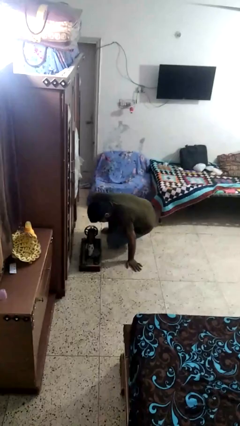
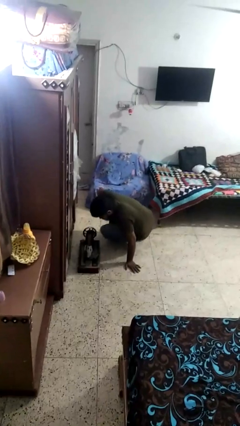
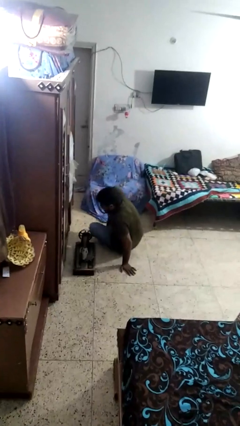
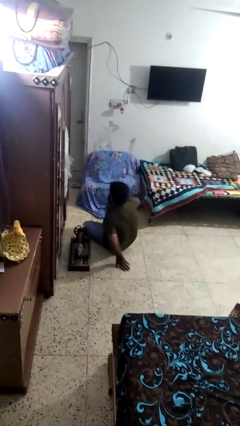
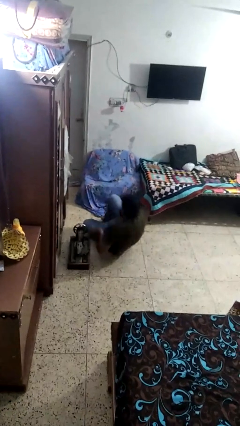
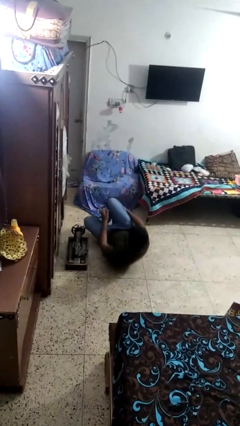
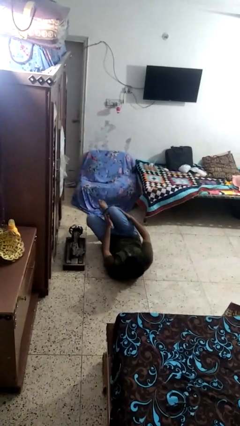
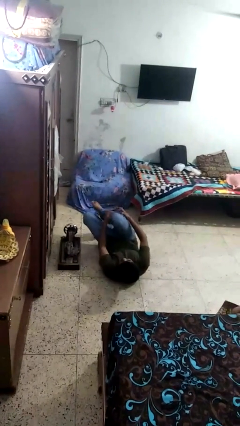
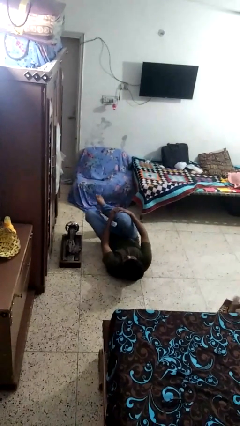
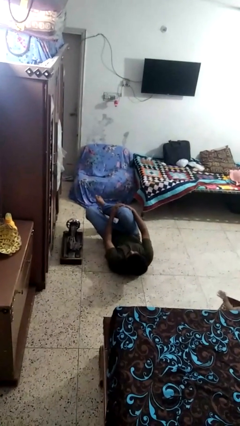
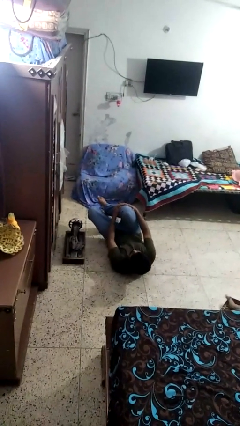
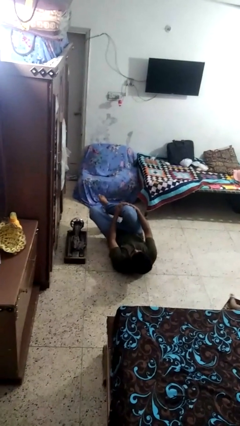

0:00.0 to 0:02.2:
person lies down on floor

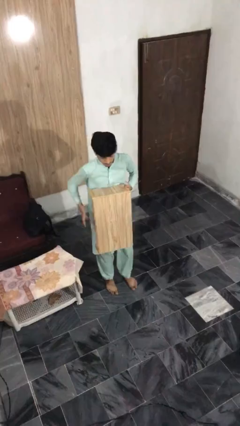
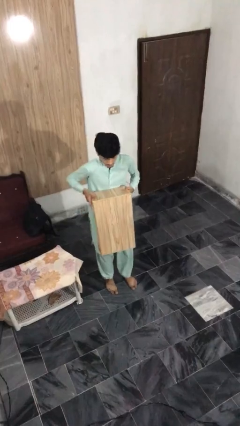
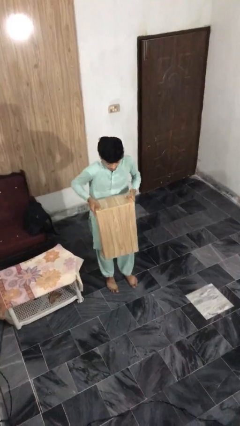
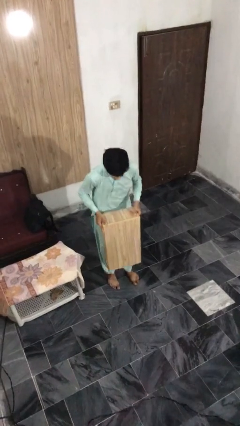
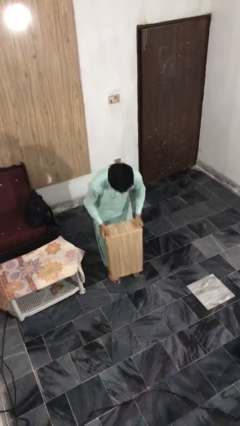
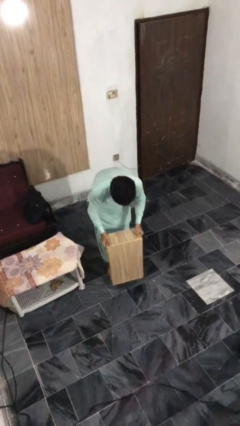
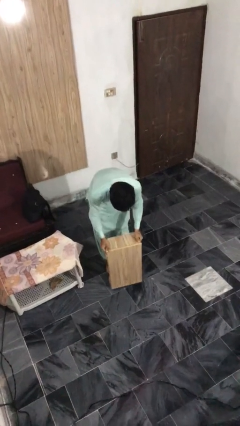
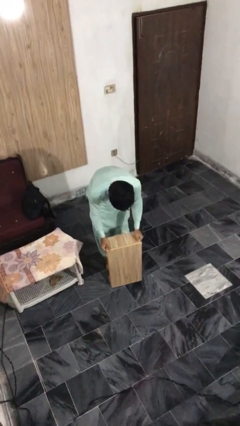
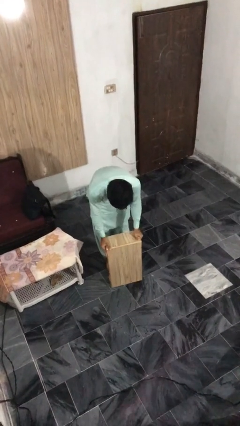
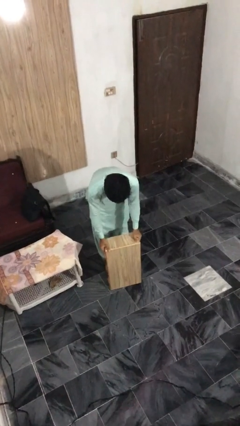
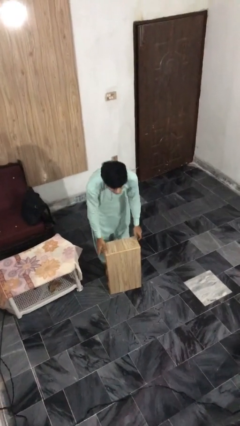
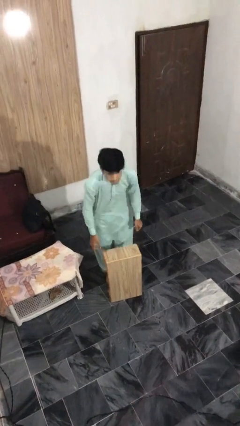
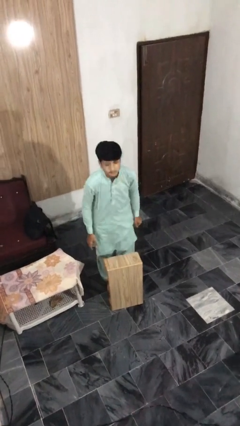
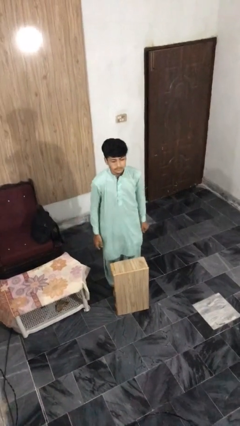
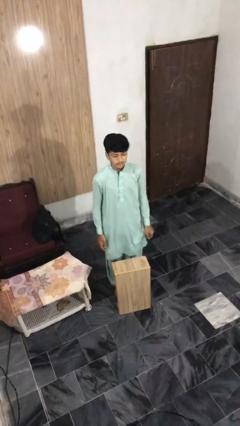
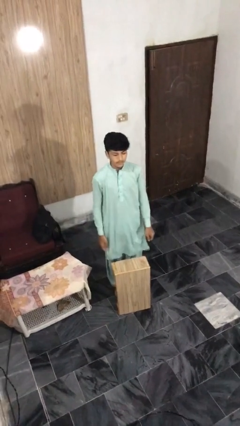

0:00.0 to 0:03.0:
person puts down object on floor

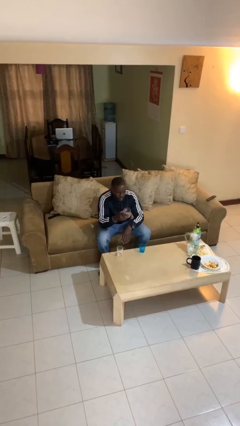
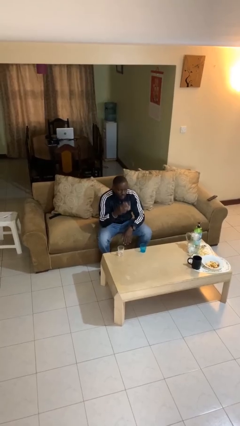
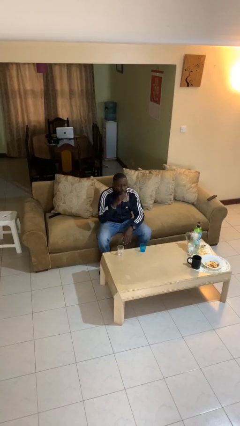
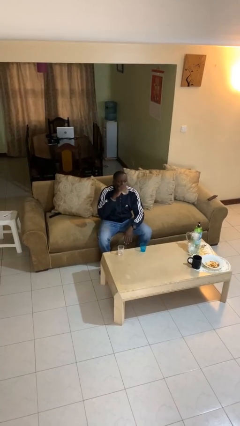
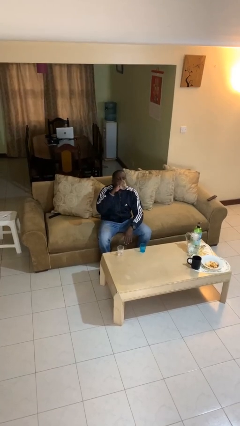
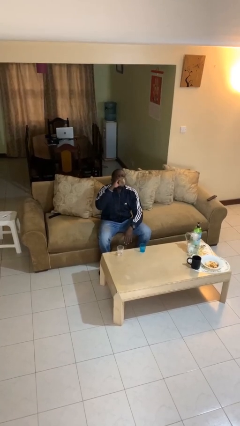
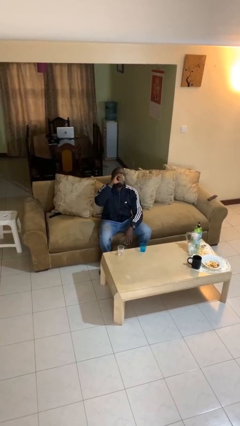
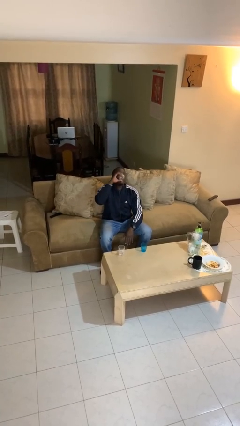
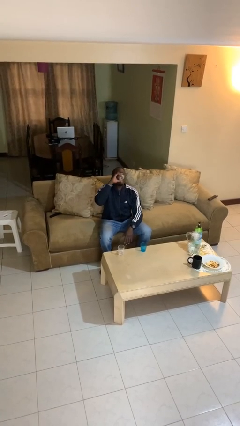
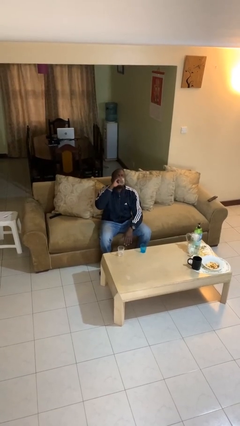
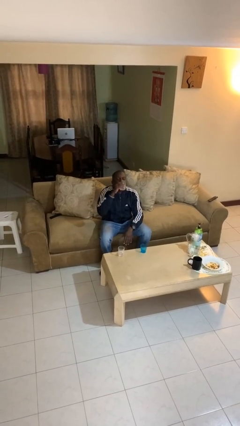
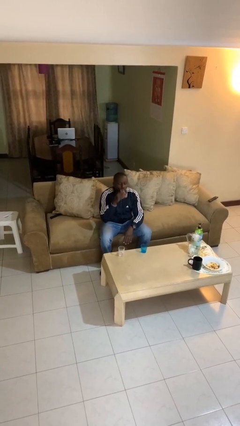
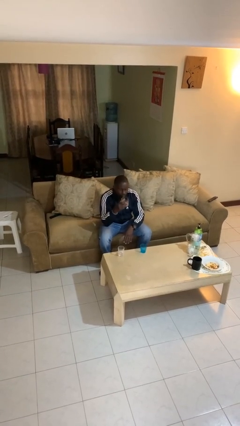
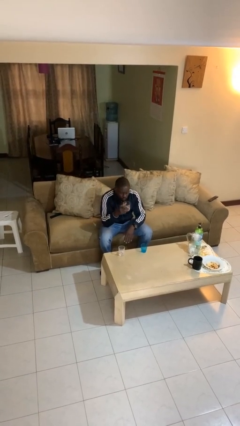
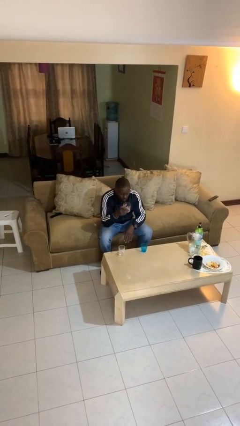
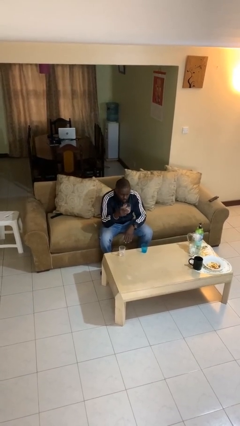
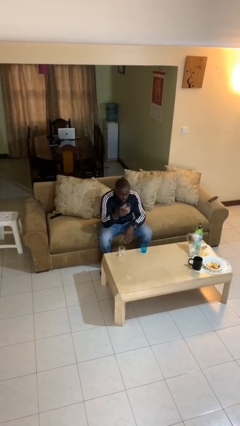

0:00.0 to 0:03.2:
person drinks from shotglass

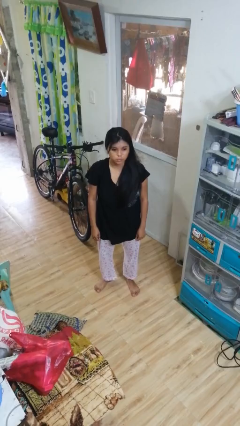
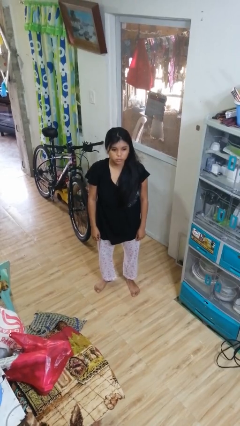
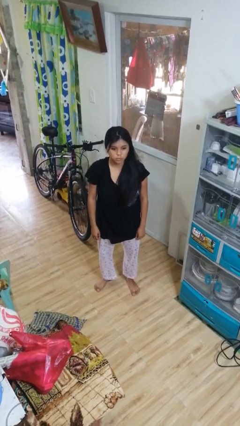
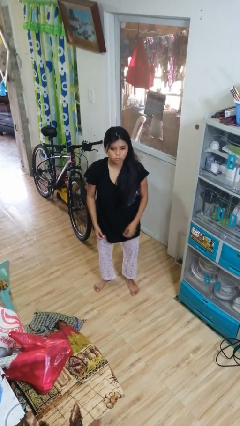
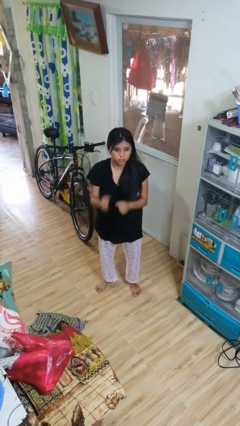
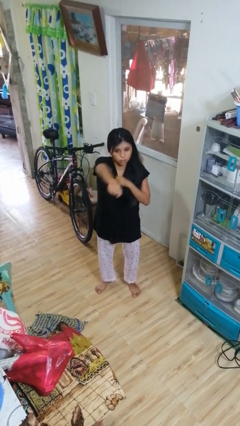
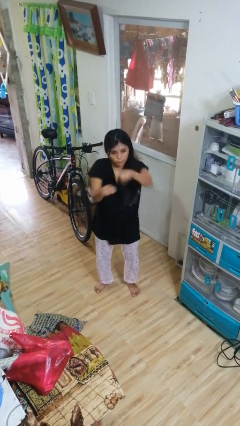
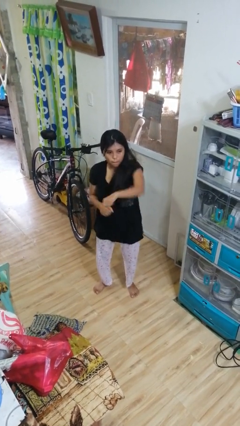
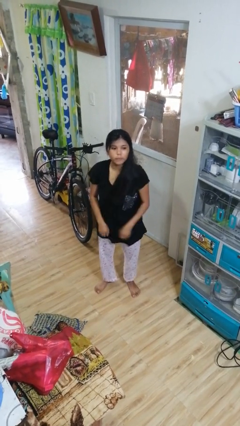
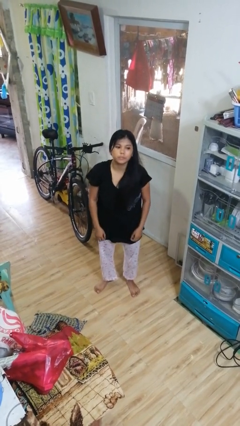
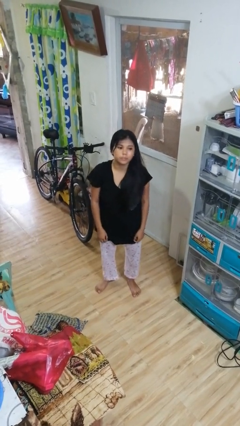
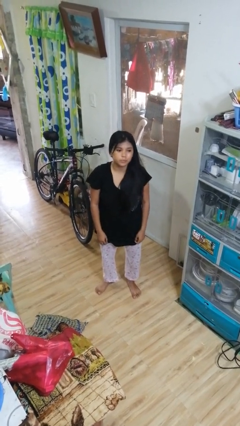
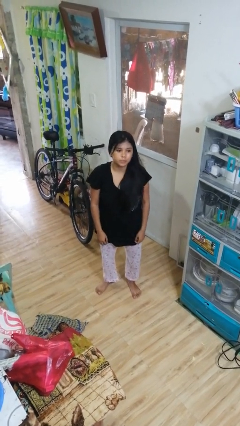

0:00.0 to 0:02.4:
person punches

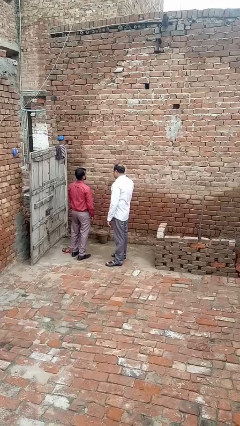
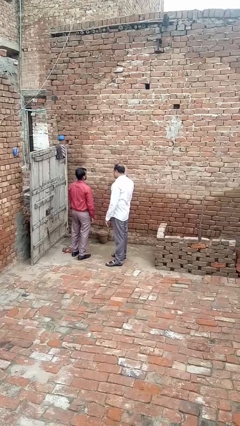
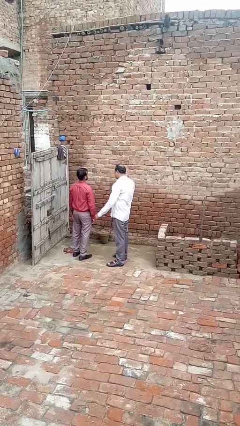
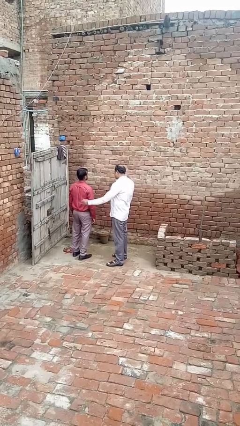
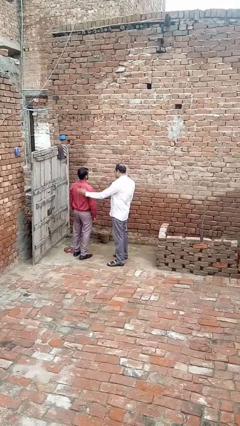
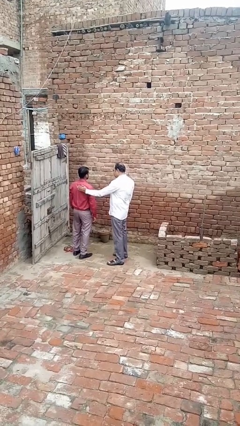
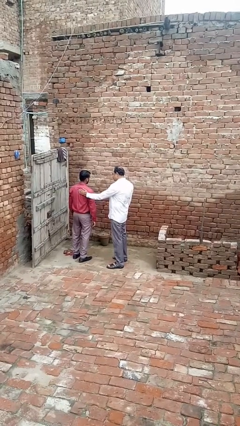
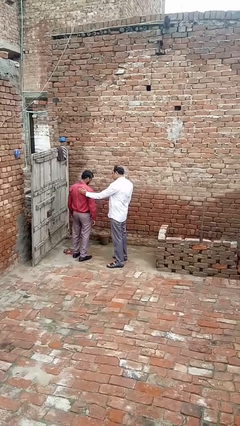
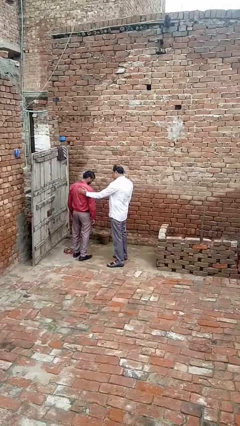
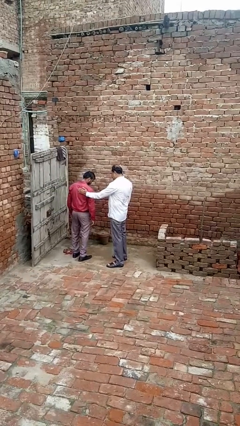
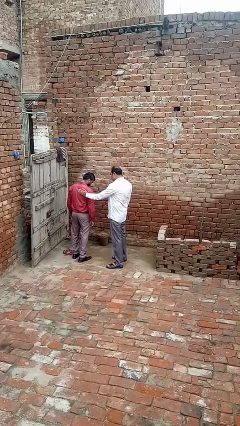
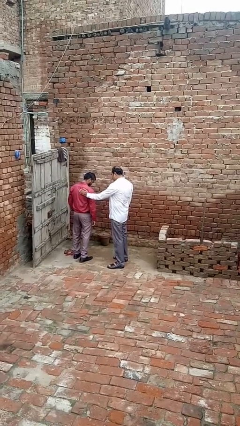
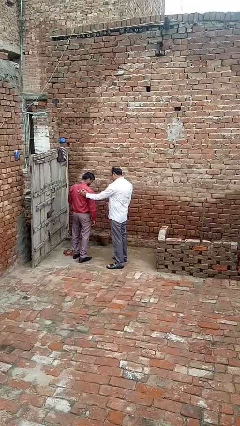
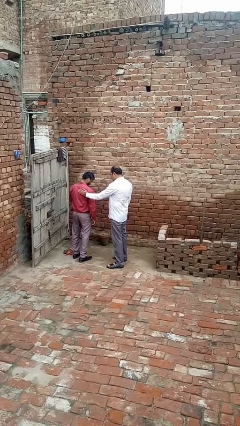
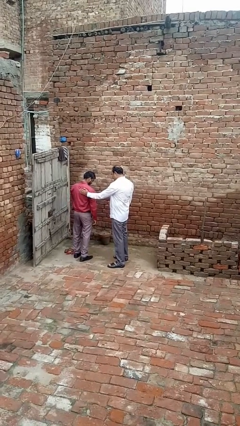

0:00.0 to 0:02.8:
person touches back of person

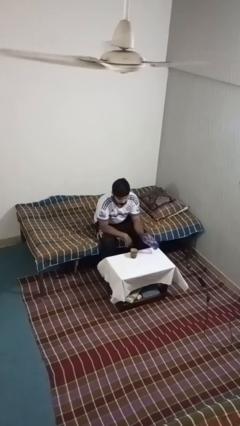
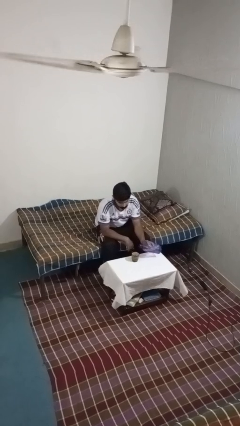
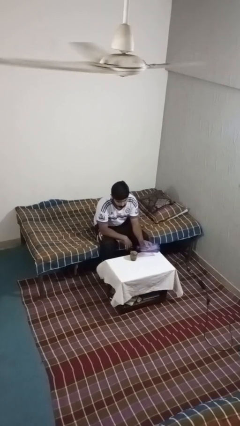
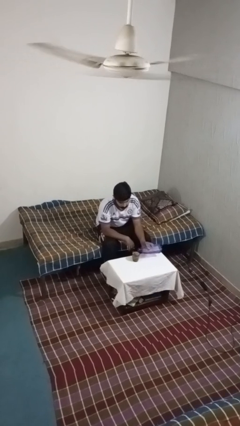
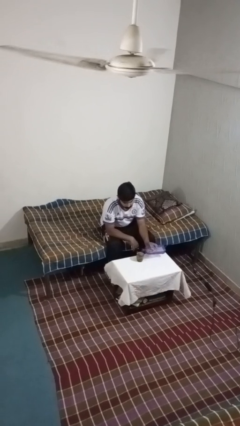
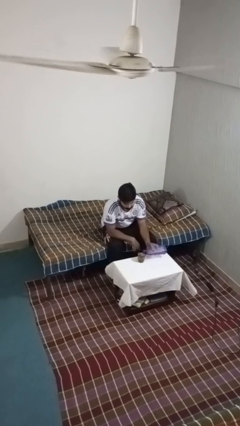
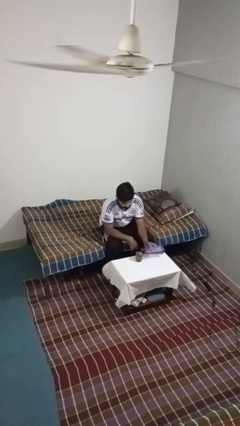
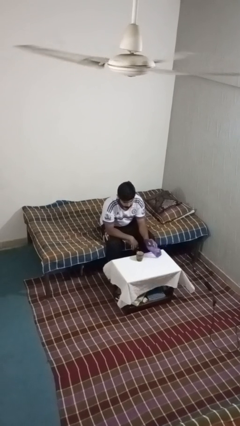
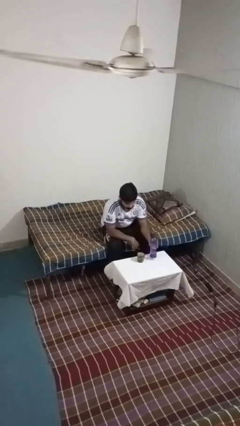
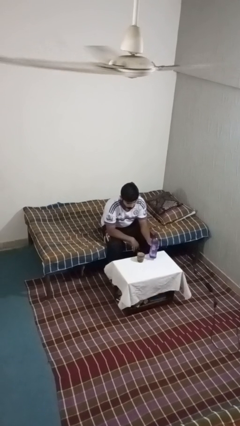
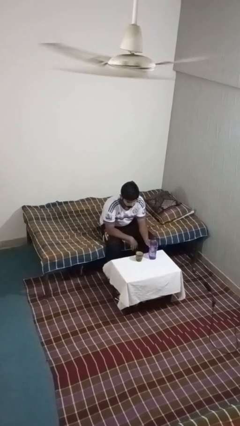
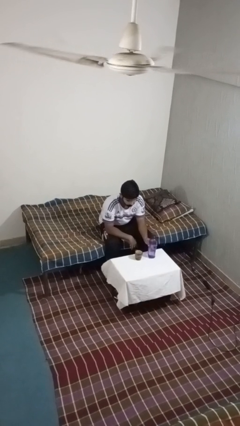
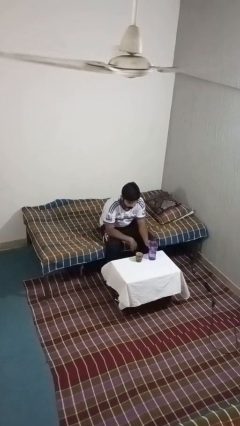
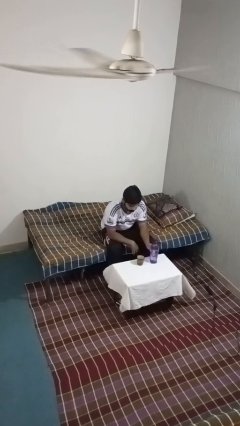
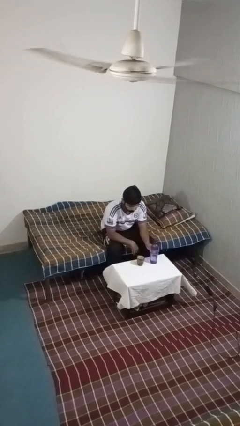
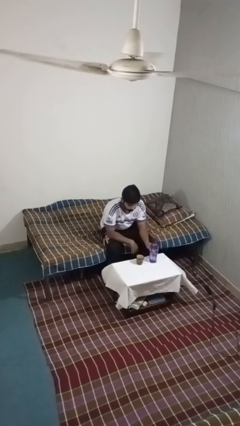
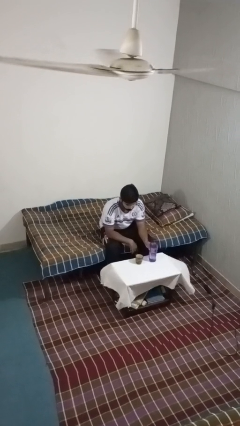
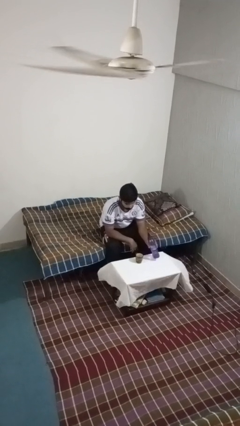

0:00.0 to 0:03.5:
person pours liquid into cup

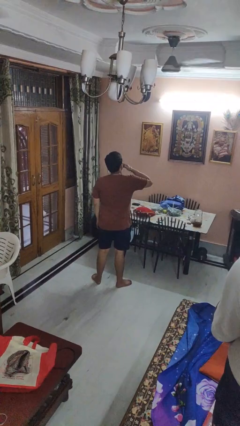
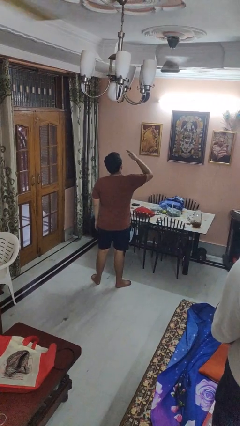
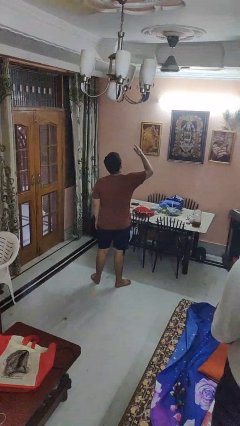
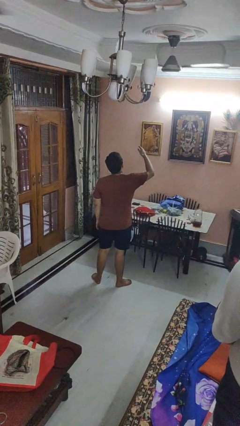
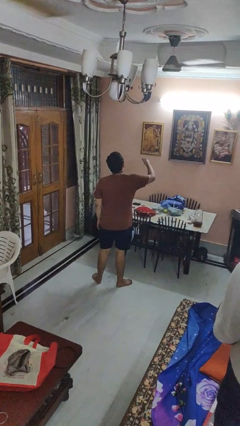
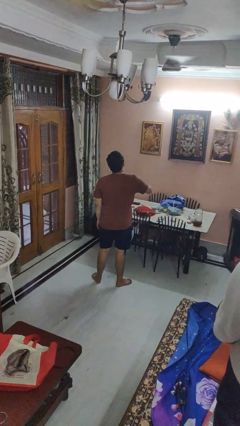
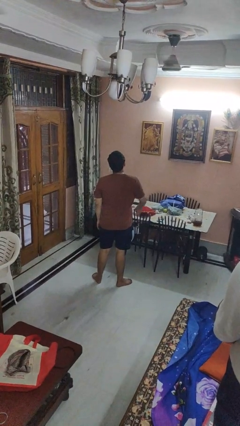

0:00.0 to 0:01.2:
person gestures blow kiss
